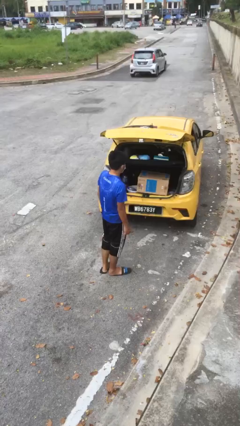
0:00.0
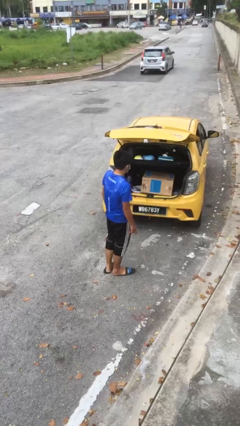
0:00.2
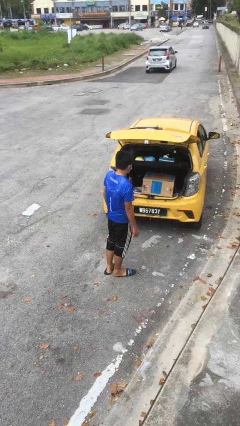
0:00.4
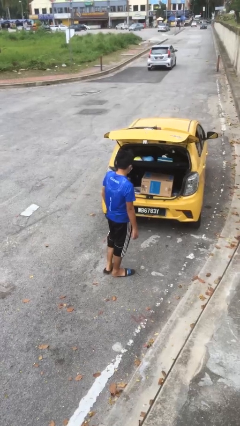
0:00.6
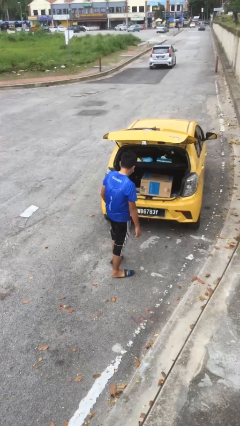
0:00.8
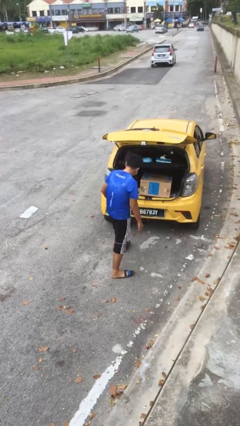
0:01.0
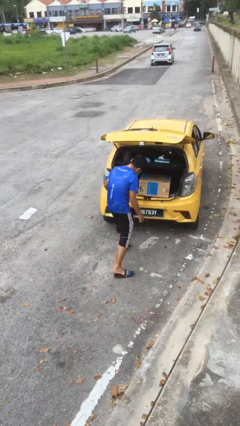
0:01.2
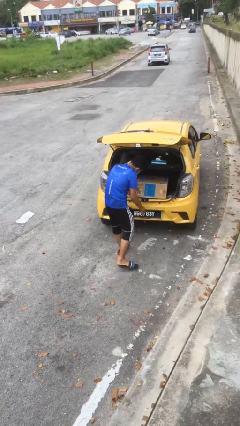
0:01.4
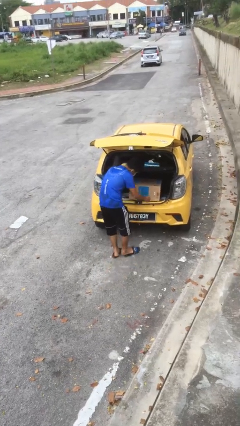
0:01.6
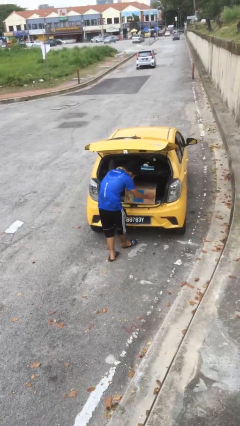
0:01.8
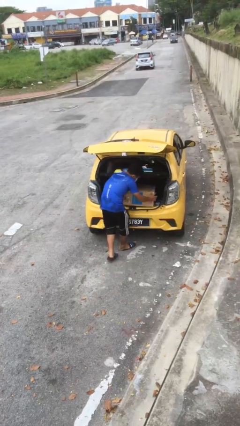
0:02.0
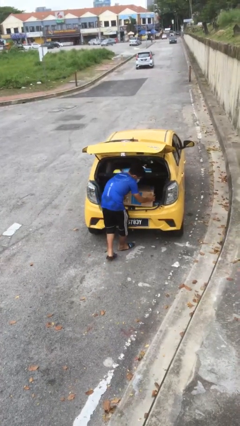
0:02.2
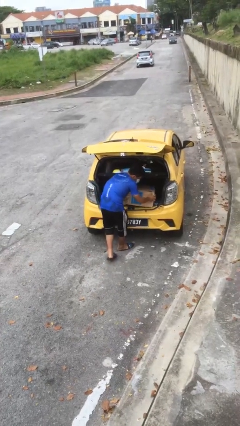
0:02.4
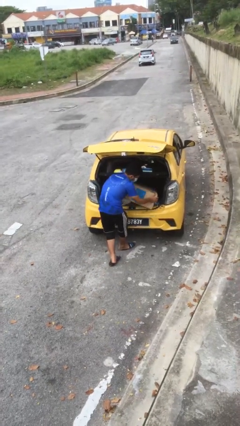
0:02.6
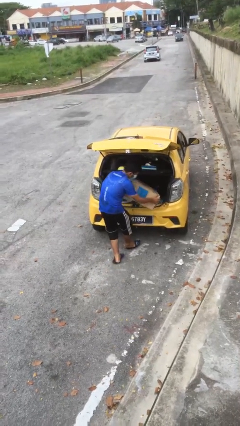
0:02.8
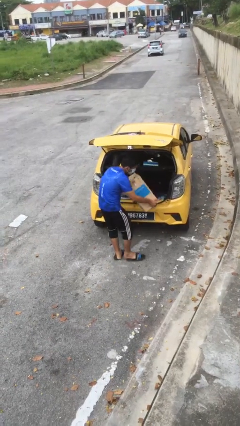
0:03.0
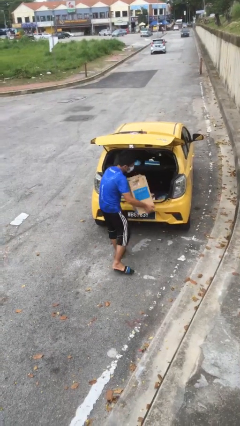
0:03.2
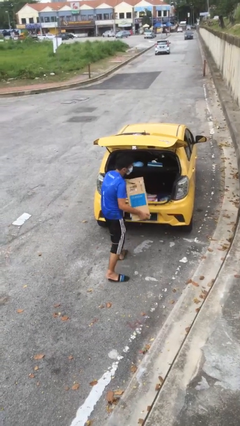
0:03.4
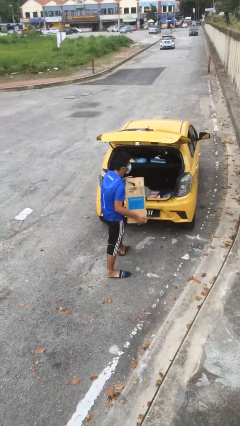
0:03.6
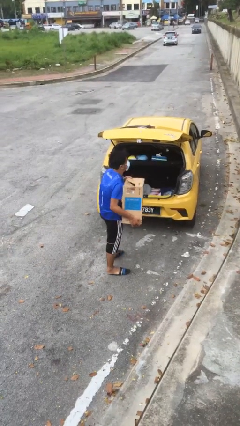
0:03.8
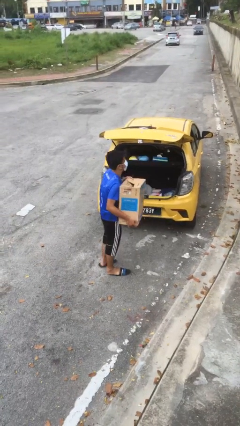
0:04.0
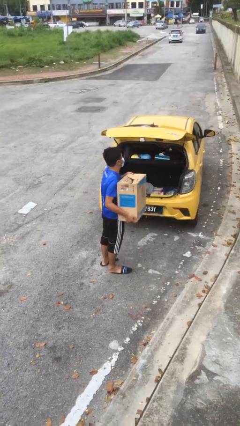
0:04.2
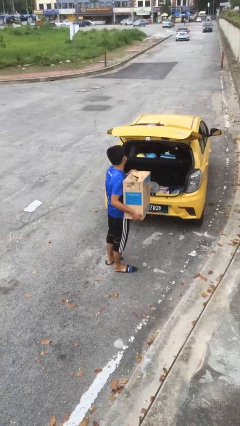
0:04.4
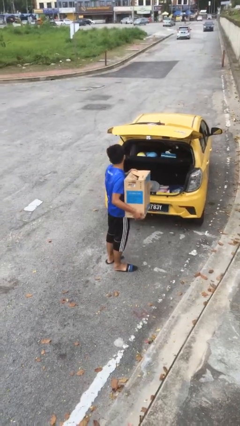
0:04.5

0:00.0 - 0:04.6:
person unloads car

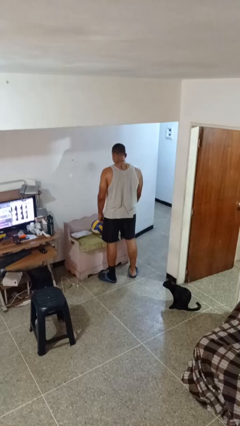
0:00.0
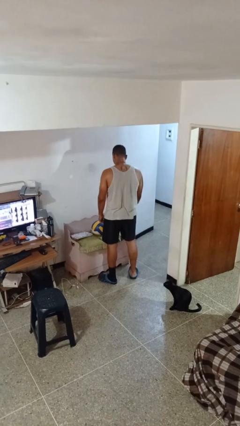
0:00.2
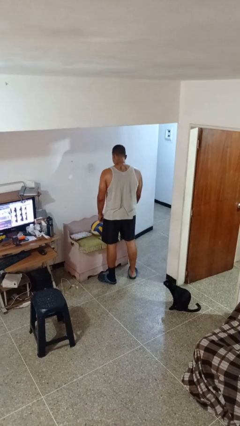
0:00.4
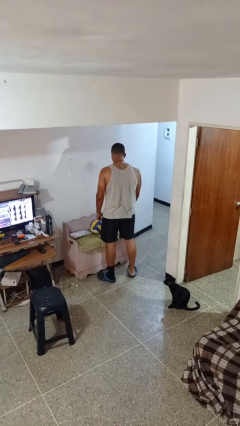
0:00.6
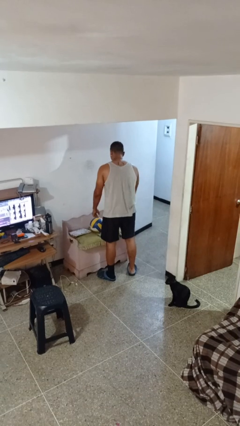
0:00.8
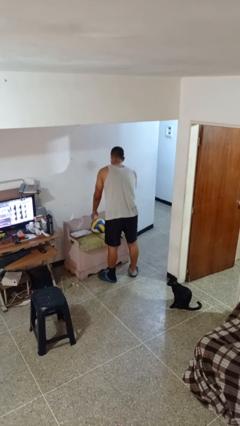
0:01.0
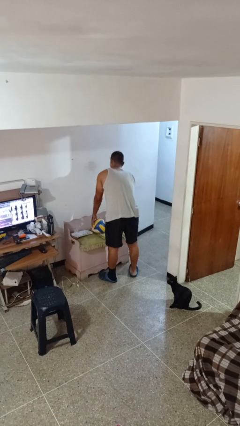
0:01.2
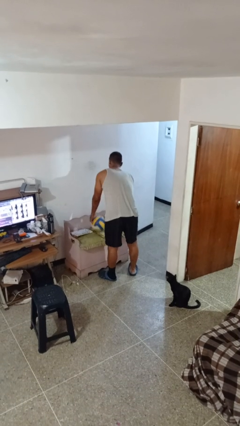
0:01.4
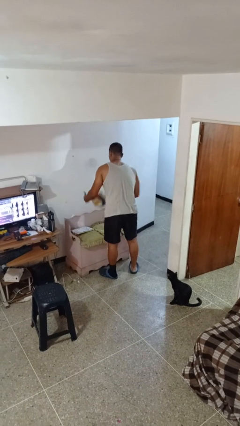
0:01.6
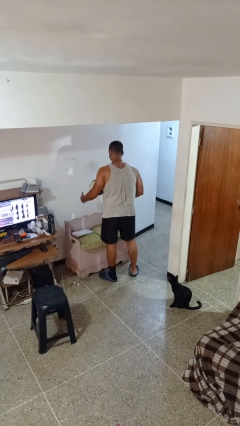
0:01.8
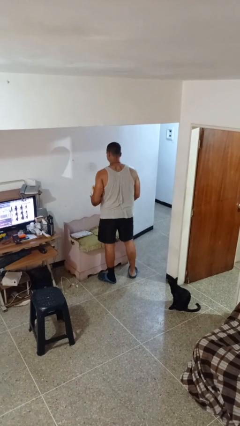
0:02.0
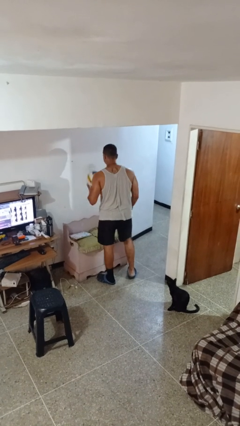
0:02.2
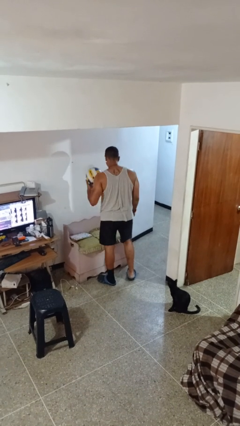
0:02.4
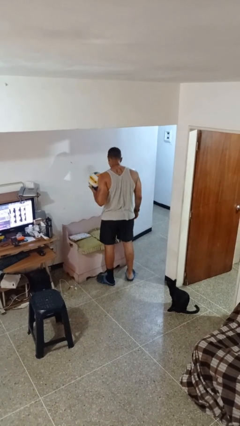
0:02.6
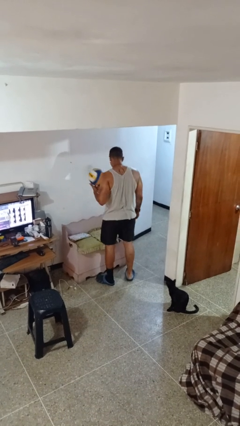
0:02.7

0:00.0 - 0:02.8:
person picks up object from couch

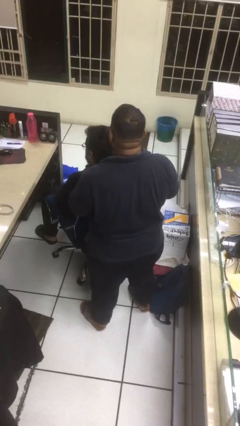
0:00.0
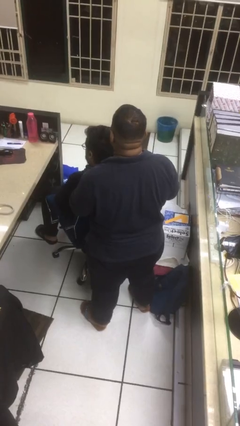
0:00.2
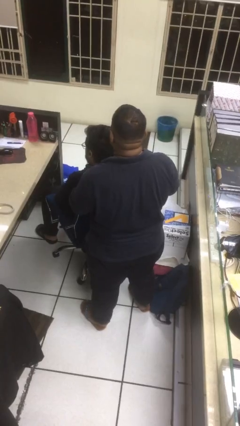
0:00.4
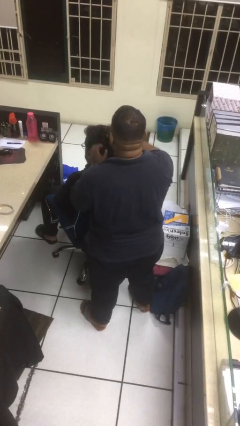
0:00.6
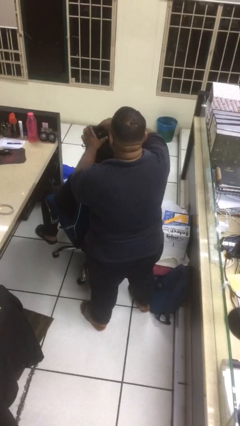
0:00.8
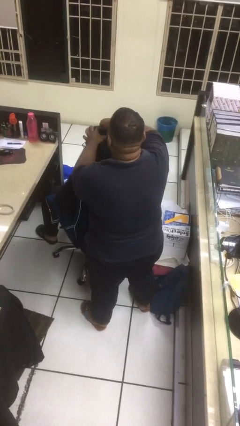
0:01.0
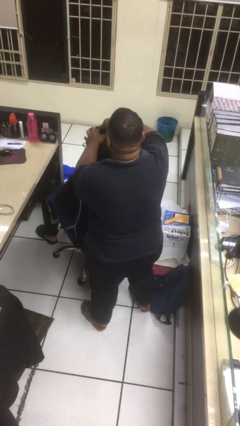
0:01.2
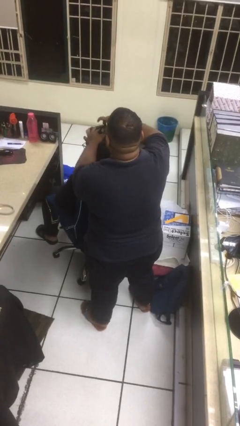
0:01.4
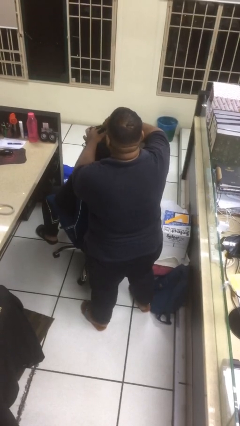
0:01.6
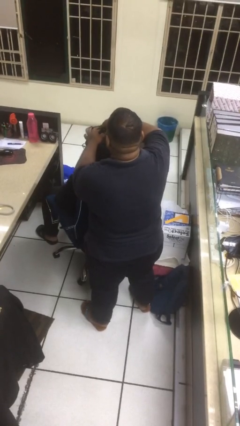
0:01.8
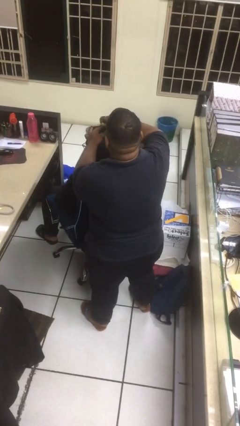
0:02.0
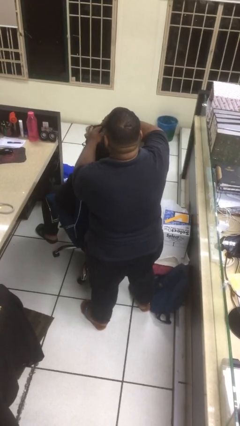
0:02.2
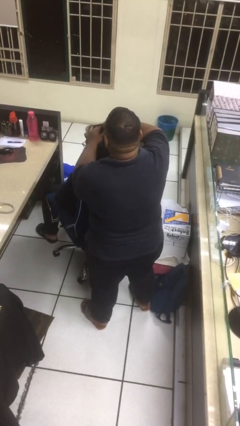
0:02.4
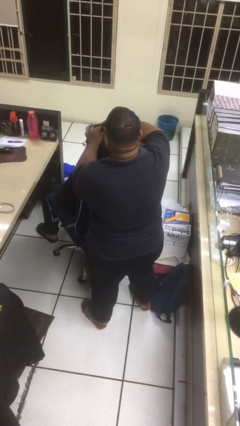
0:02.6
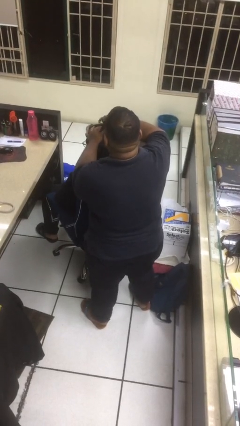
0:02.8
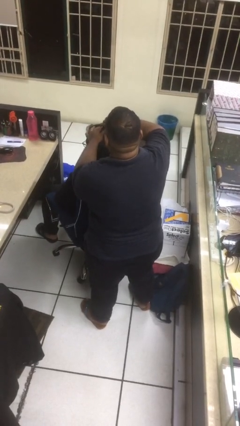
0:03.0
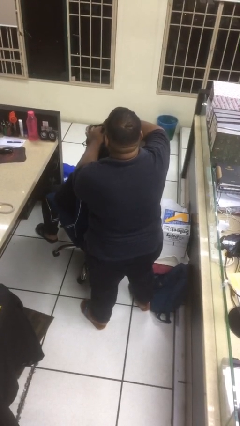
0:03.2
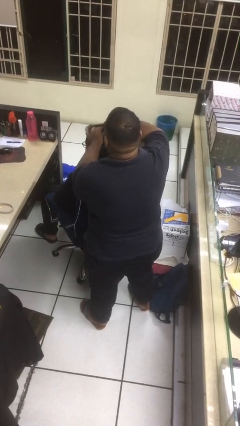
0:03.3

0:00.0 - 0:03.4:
person braids hair of person

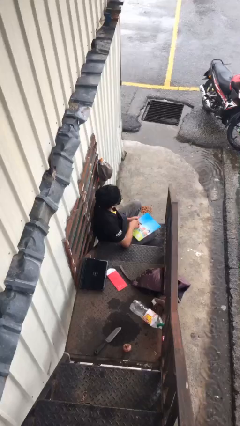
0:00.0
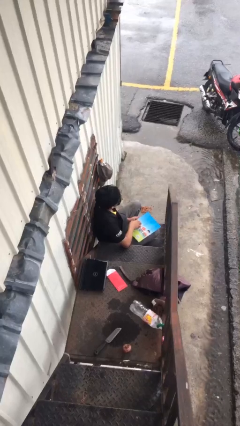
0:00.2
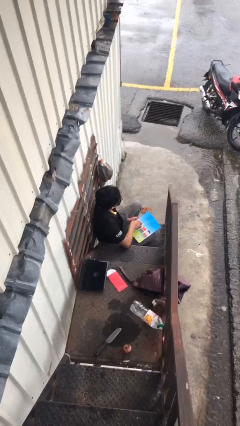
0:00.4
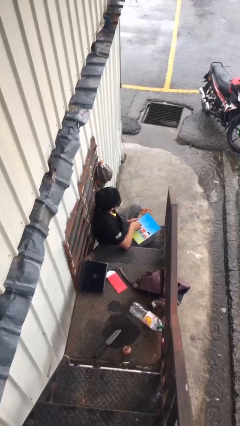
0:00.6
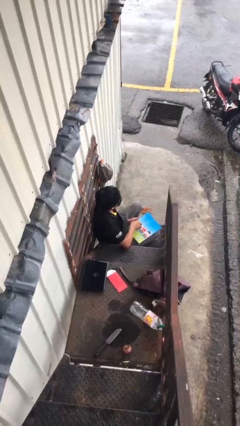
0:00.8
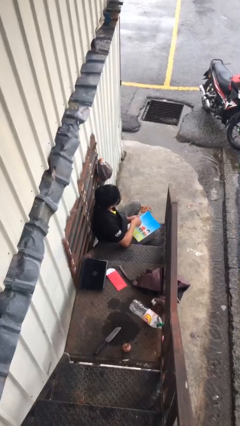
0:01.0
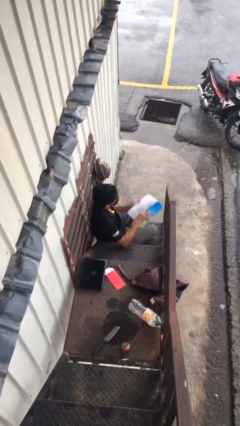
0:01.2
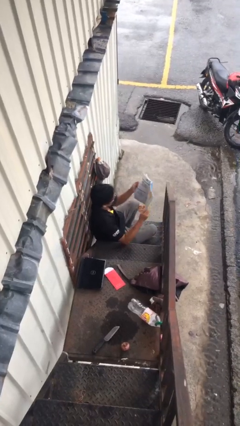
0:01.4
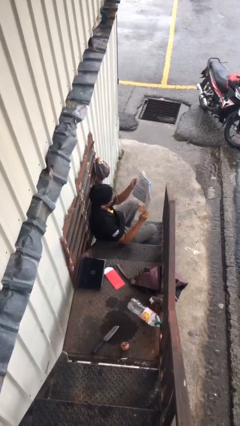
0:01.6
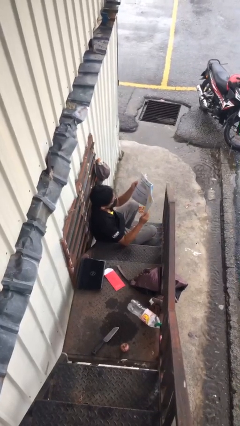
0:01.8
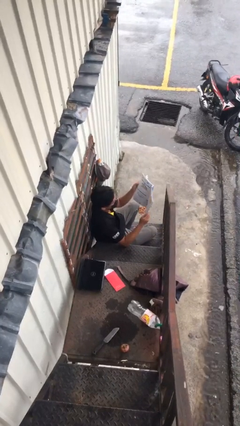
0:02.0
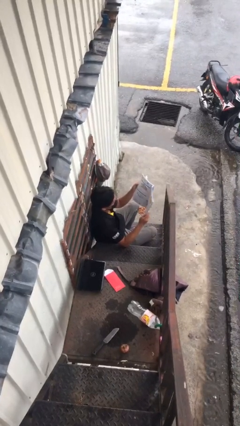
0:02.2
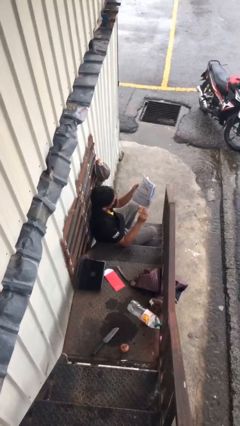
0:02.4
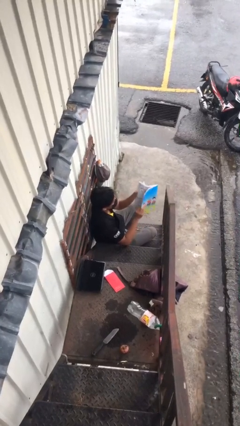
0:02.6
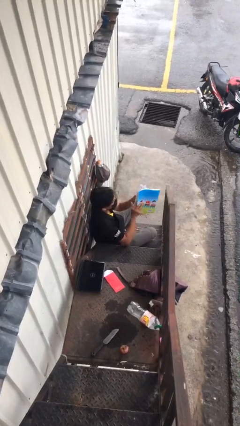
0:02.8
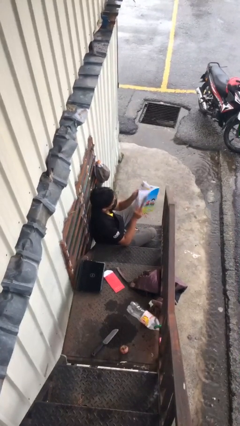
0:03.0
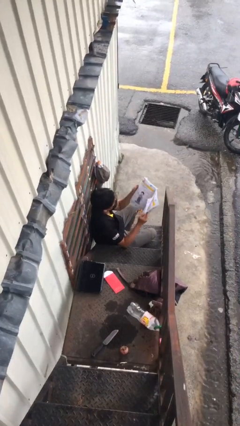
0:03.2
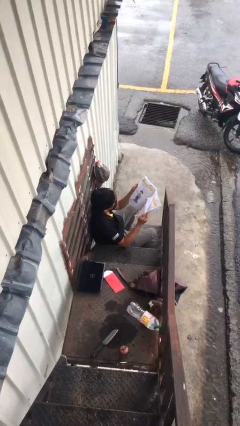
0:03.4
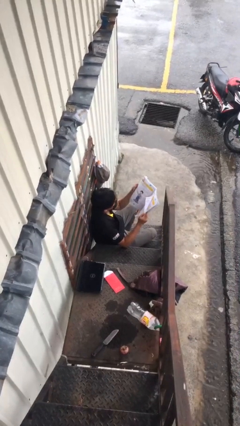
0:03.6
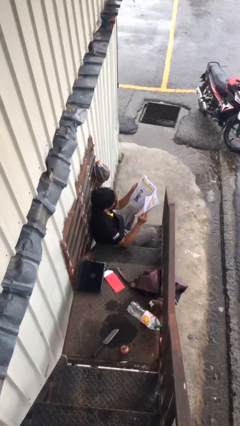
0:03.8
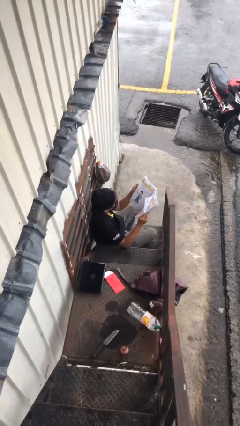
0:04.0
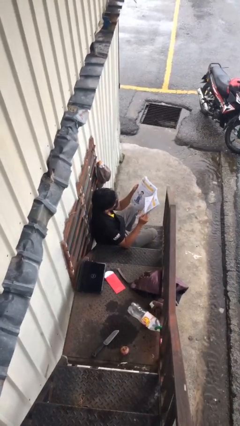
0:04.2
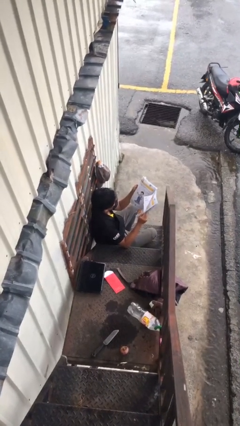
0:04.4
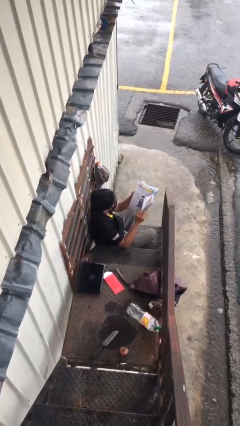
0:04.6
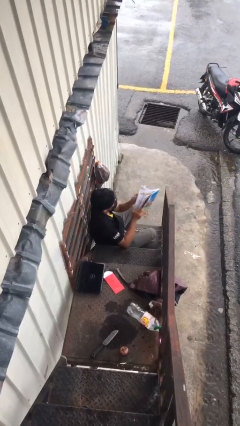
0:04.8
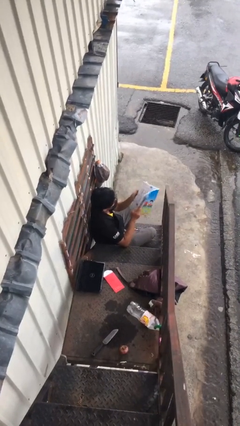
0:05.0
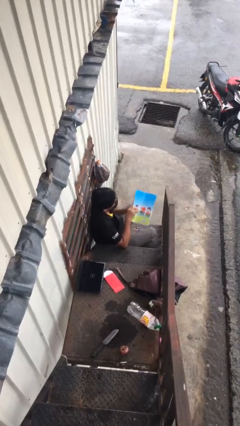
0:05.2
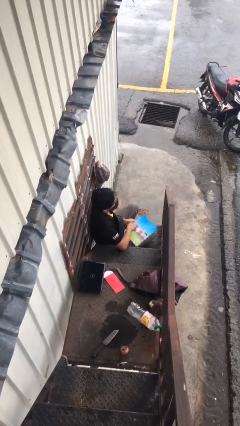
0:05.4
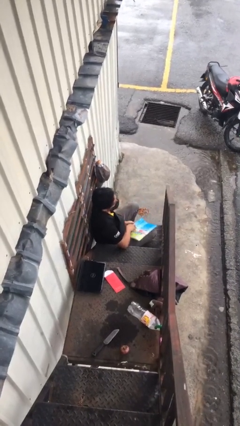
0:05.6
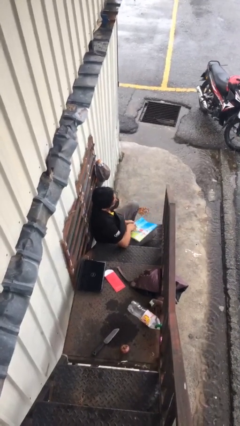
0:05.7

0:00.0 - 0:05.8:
person reads document

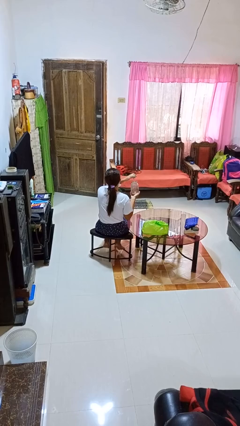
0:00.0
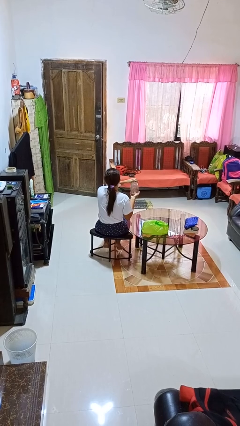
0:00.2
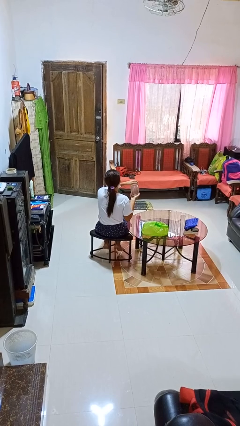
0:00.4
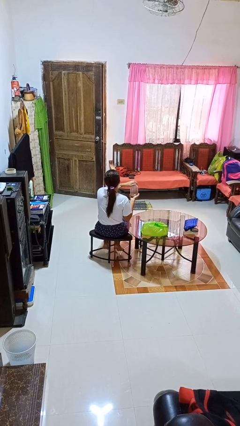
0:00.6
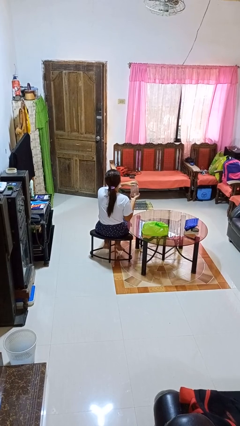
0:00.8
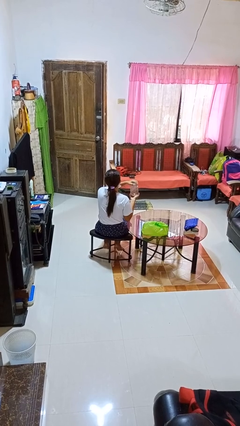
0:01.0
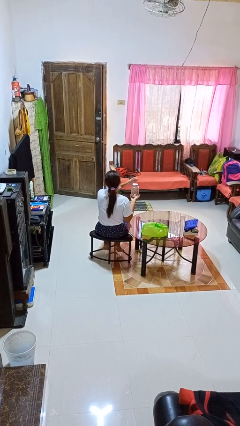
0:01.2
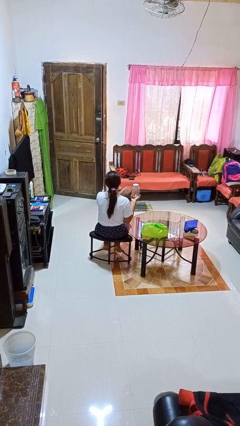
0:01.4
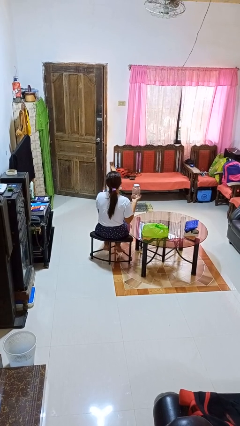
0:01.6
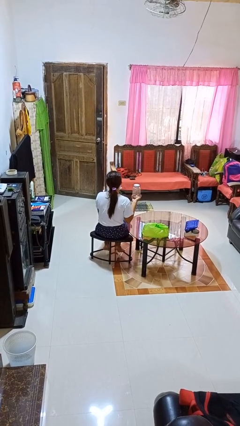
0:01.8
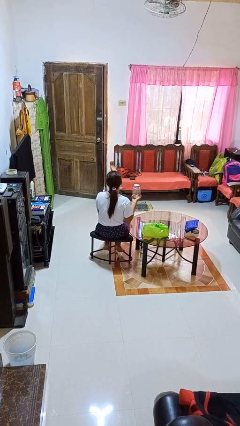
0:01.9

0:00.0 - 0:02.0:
person closes jar
